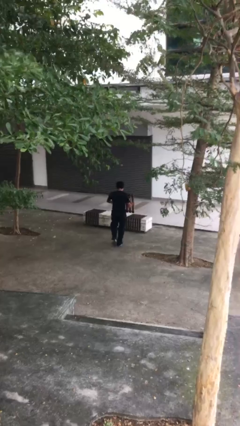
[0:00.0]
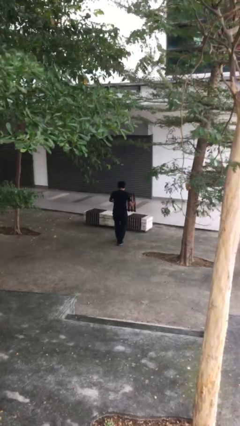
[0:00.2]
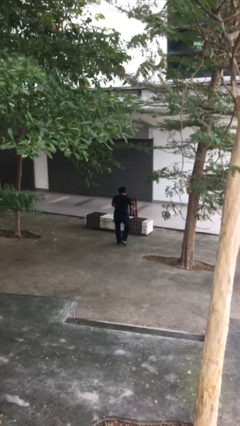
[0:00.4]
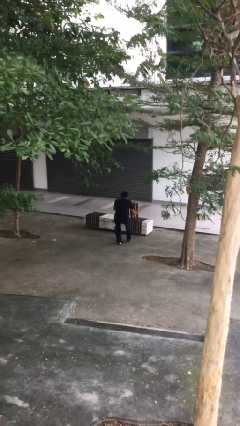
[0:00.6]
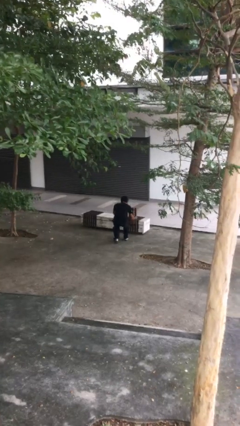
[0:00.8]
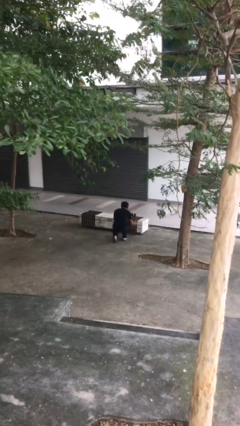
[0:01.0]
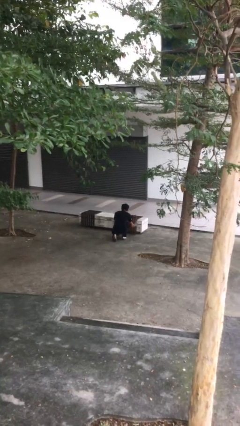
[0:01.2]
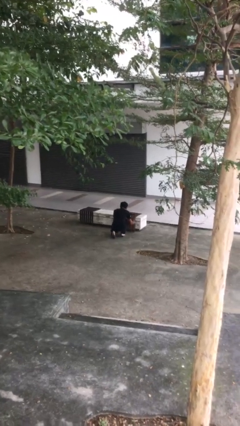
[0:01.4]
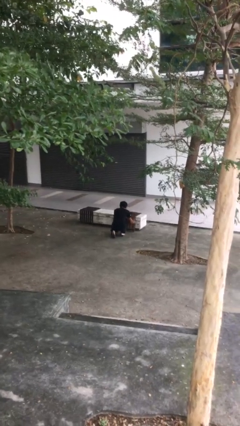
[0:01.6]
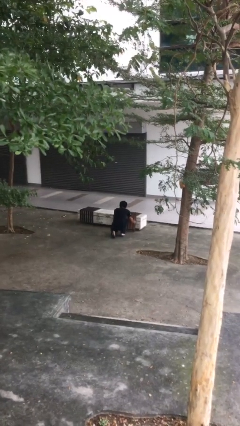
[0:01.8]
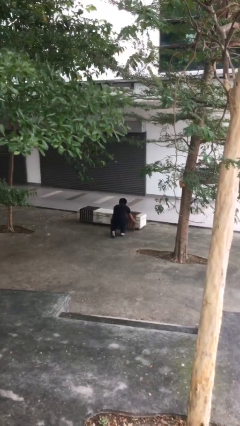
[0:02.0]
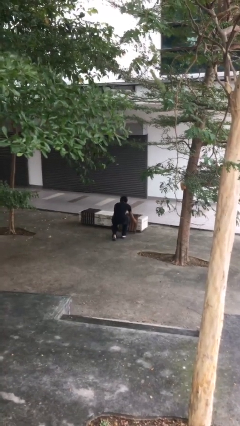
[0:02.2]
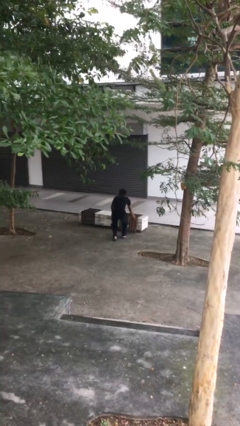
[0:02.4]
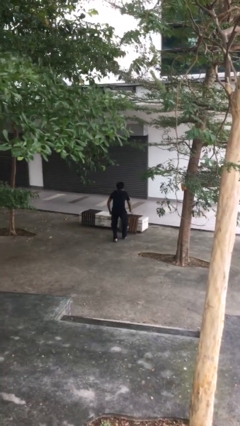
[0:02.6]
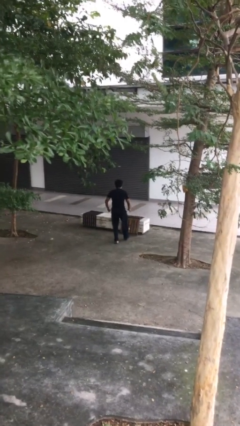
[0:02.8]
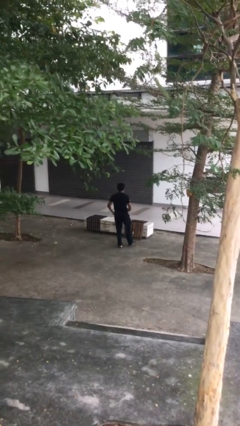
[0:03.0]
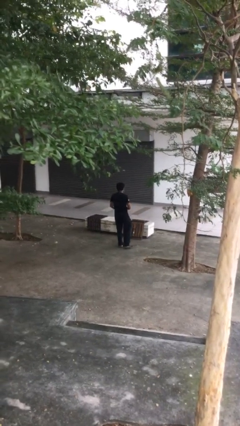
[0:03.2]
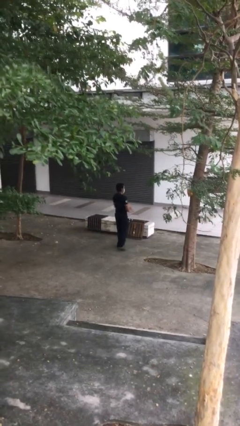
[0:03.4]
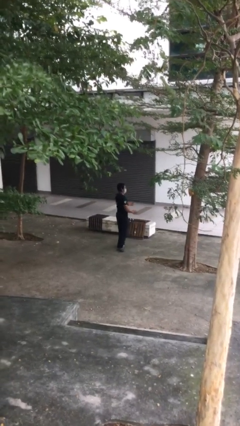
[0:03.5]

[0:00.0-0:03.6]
person puts down object on floor

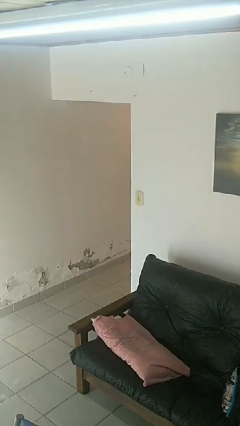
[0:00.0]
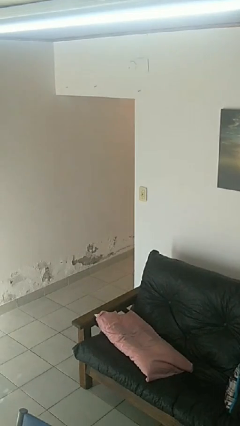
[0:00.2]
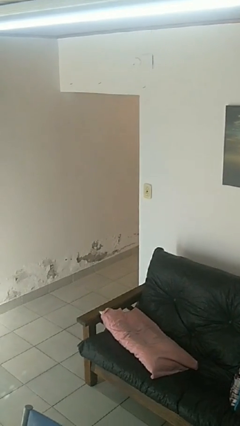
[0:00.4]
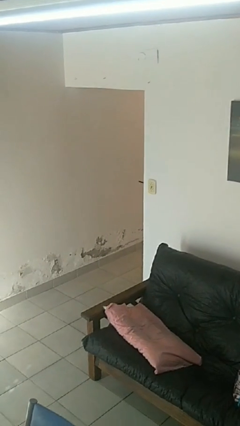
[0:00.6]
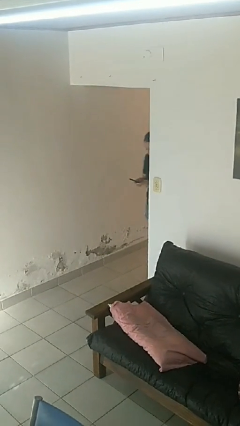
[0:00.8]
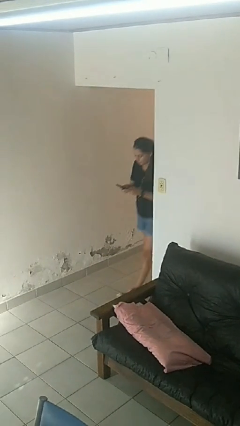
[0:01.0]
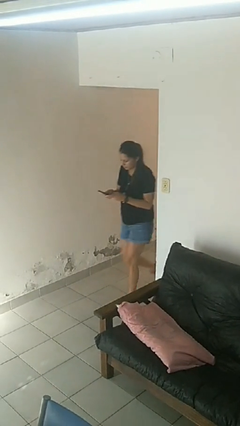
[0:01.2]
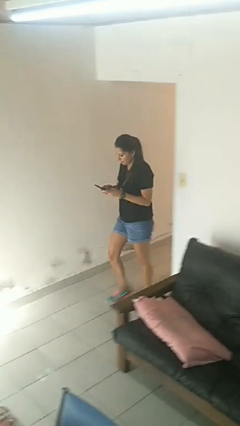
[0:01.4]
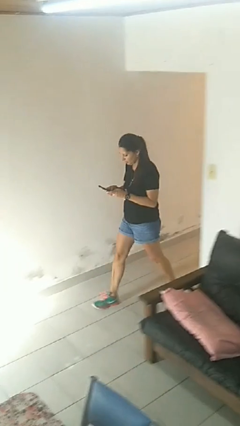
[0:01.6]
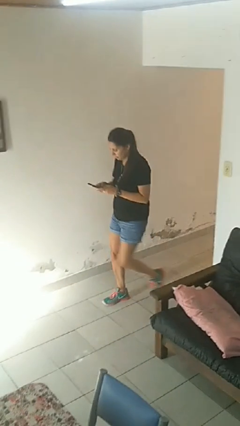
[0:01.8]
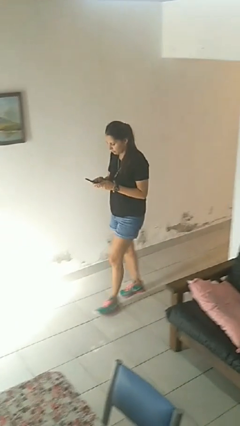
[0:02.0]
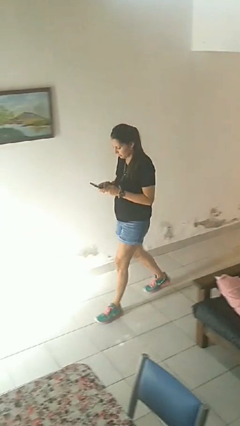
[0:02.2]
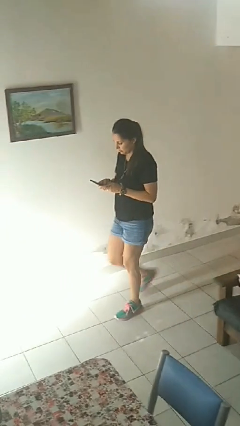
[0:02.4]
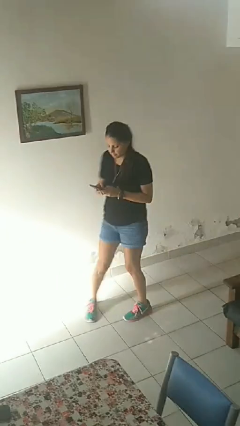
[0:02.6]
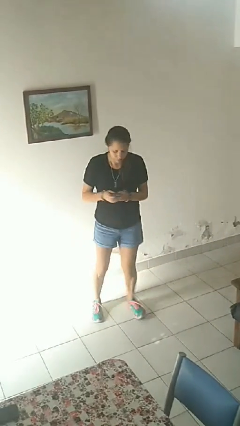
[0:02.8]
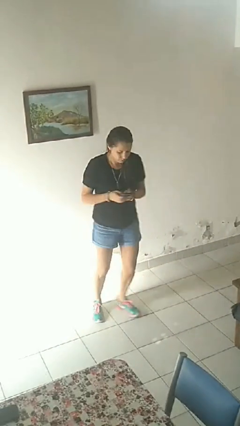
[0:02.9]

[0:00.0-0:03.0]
person enters scene through structure

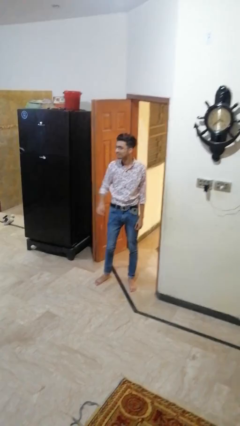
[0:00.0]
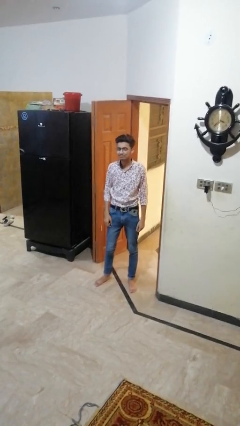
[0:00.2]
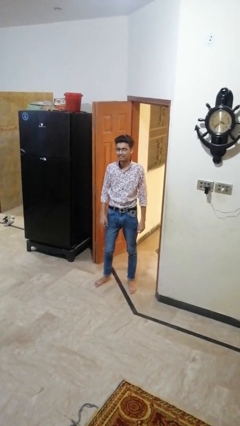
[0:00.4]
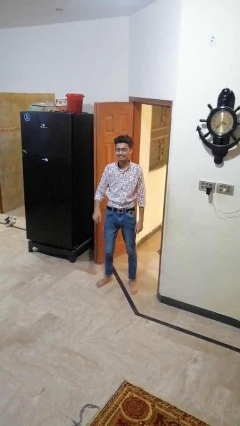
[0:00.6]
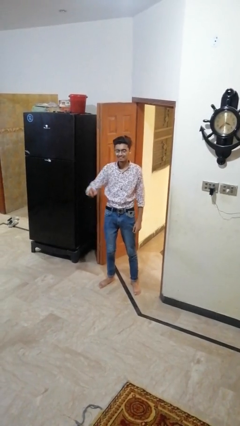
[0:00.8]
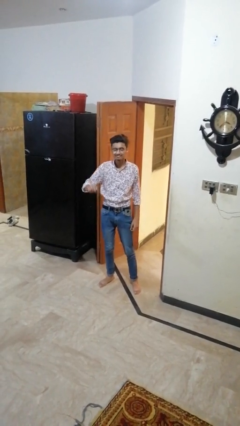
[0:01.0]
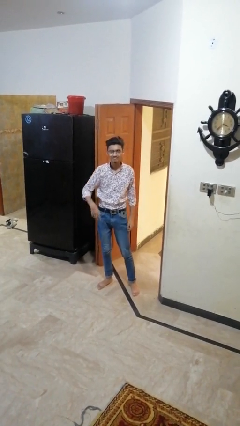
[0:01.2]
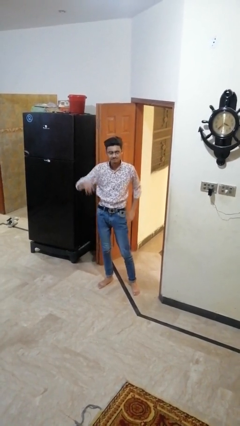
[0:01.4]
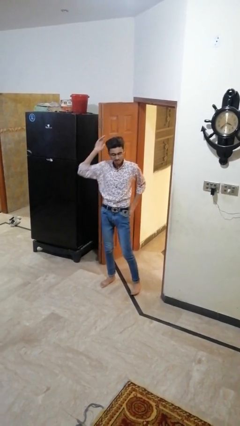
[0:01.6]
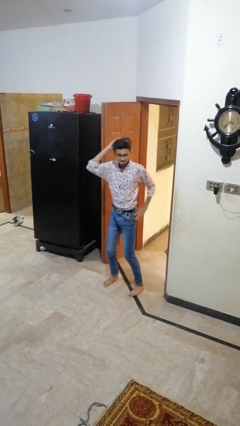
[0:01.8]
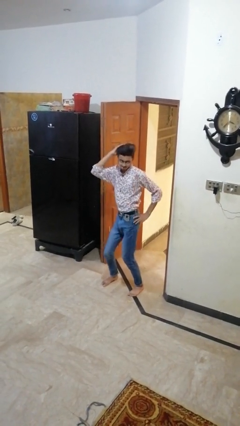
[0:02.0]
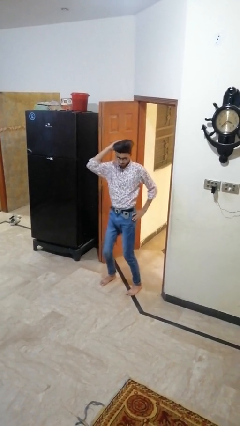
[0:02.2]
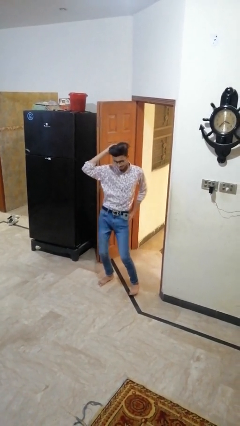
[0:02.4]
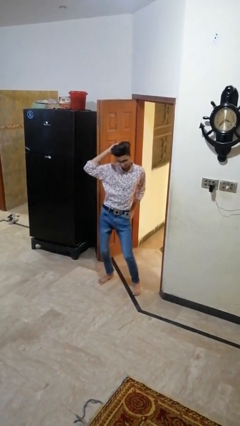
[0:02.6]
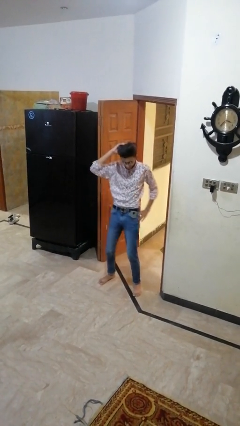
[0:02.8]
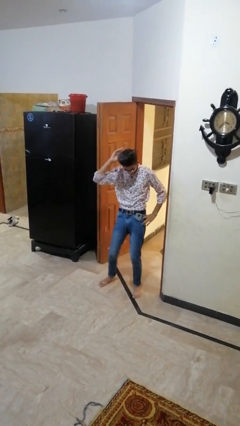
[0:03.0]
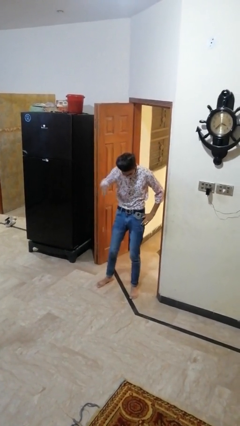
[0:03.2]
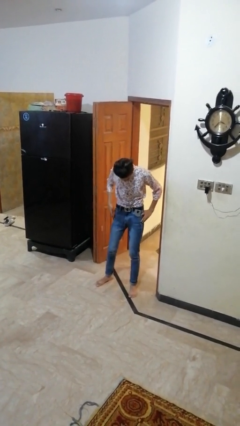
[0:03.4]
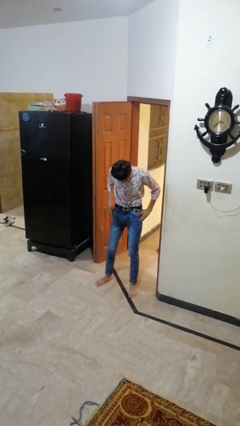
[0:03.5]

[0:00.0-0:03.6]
person dances in place

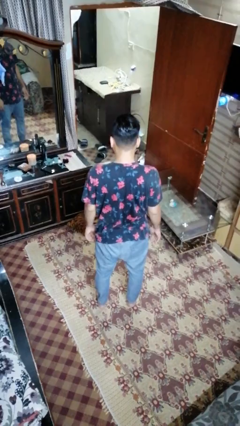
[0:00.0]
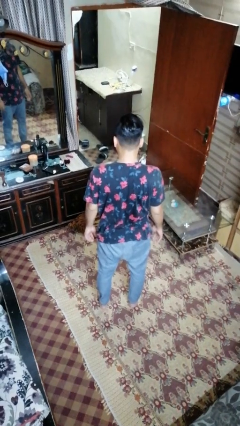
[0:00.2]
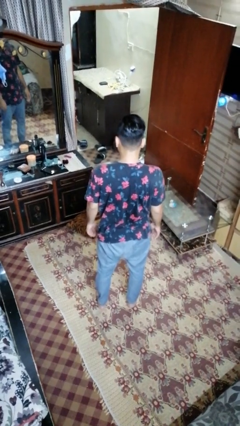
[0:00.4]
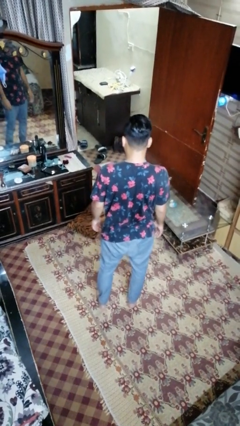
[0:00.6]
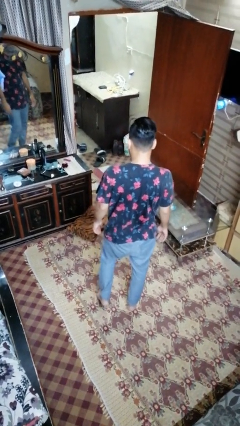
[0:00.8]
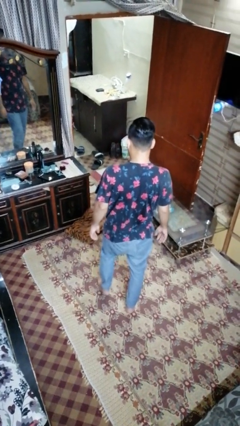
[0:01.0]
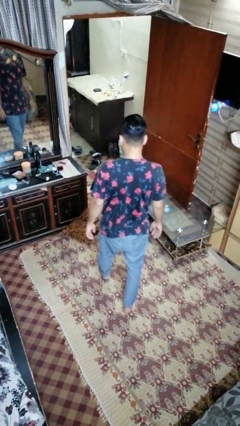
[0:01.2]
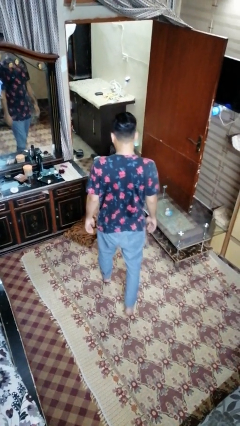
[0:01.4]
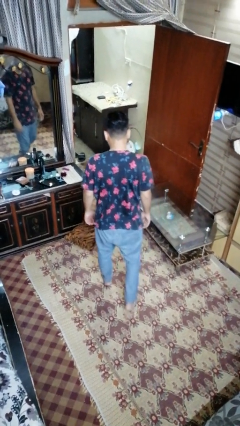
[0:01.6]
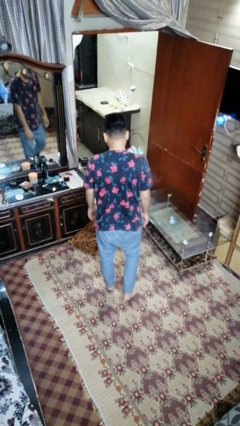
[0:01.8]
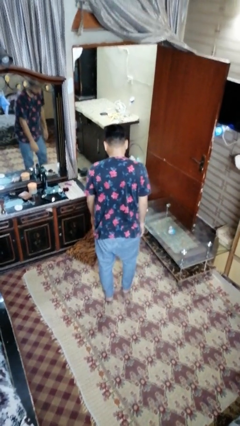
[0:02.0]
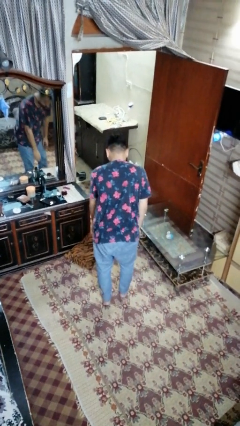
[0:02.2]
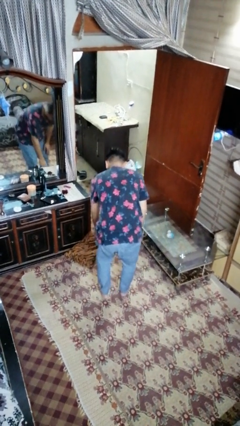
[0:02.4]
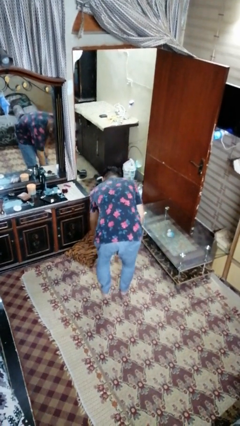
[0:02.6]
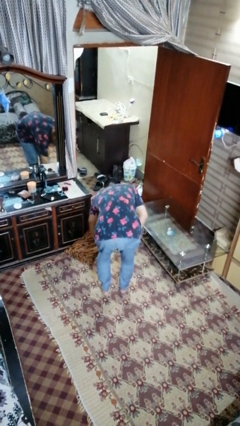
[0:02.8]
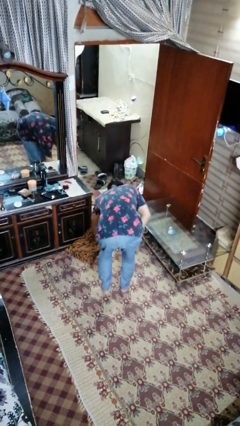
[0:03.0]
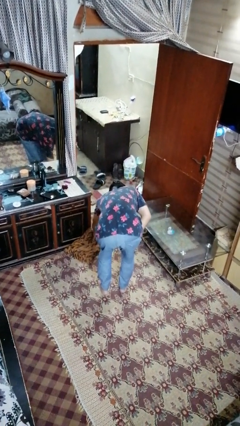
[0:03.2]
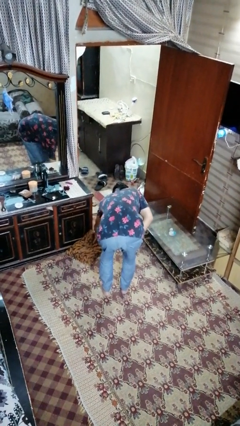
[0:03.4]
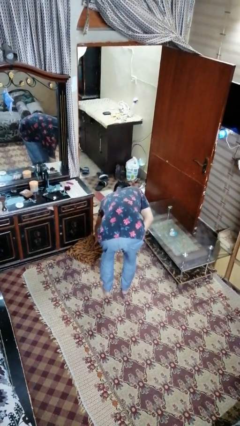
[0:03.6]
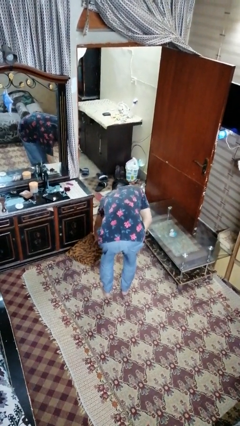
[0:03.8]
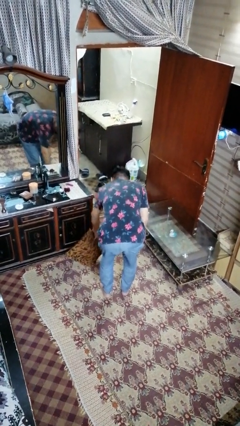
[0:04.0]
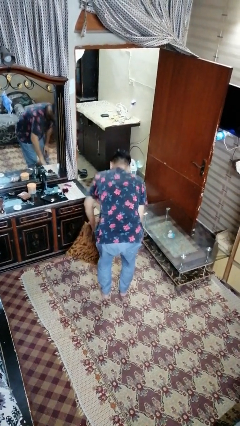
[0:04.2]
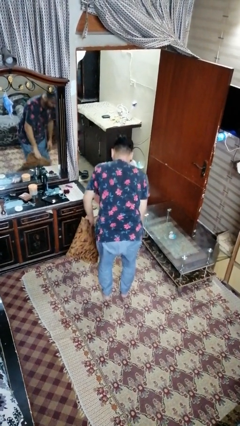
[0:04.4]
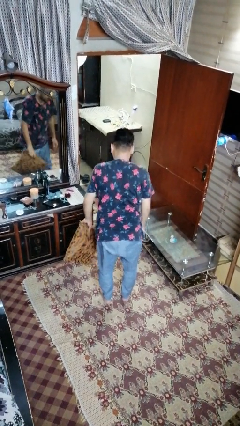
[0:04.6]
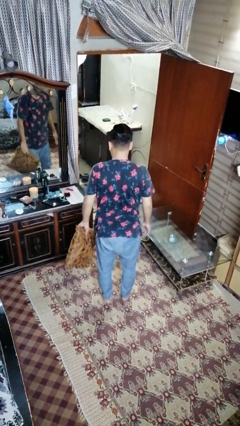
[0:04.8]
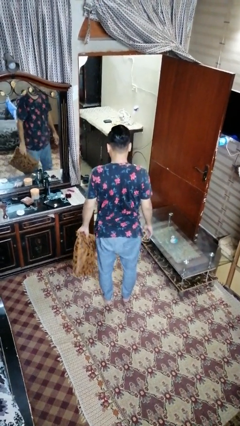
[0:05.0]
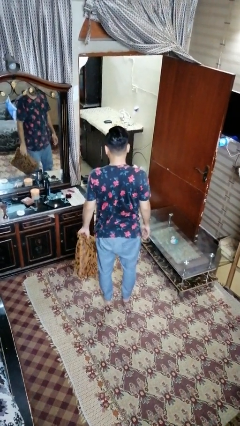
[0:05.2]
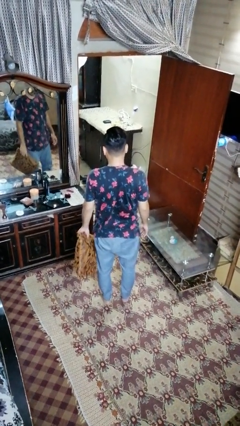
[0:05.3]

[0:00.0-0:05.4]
person picks up object from floor

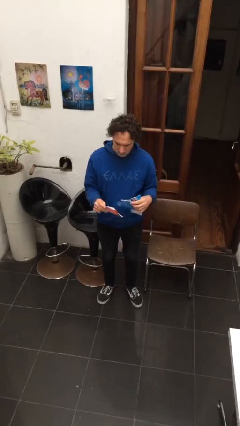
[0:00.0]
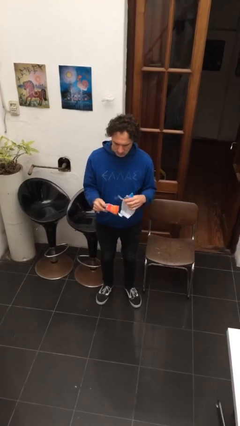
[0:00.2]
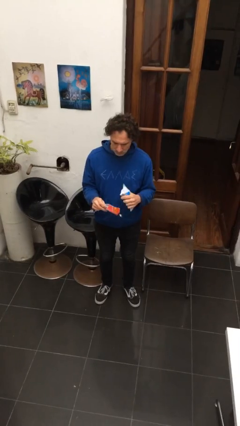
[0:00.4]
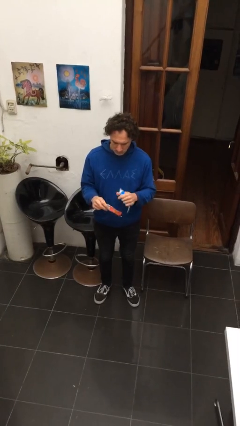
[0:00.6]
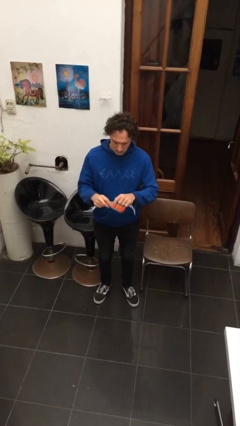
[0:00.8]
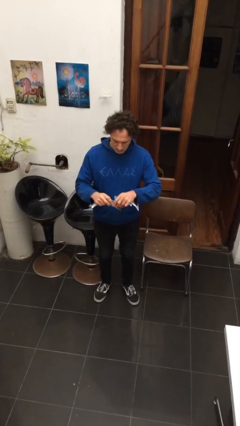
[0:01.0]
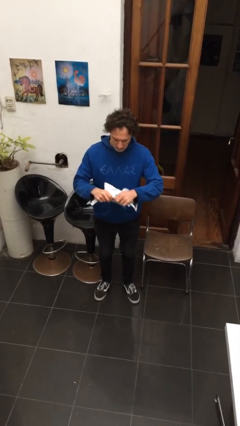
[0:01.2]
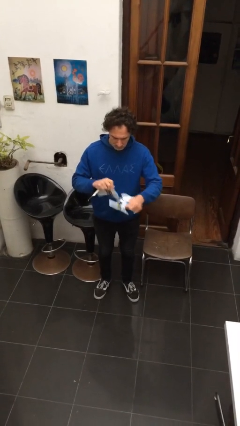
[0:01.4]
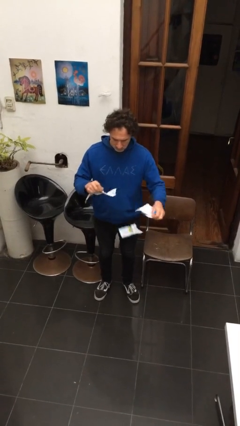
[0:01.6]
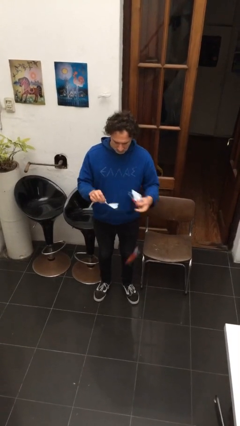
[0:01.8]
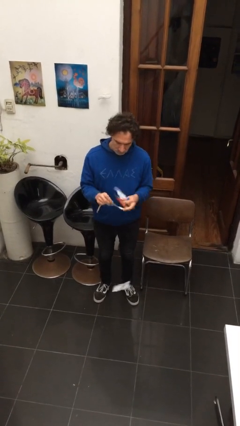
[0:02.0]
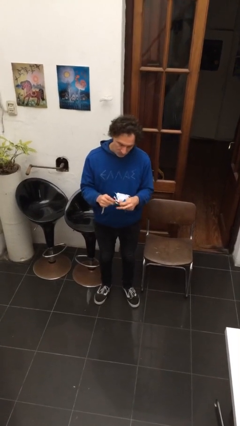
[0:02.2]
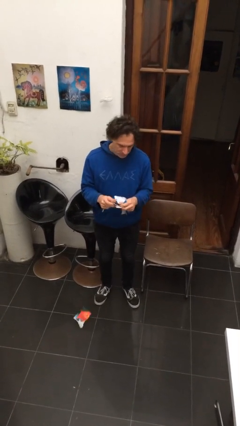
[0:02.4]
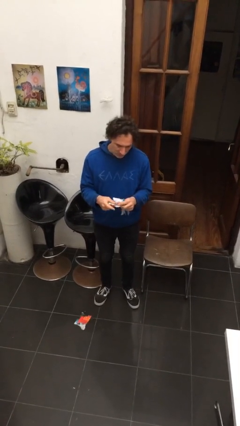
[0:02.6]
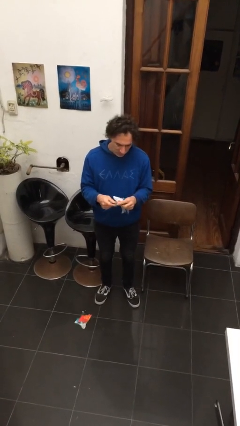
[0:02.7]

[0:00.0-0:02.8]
person tears paper
